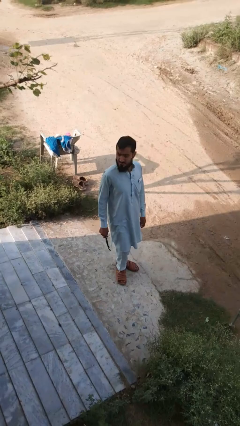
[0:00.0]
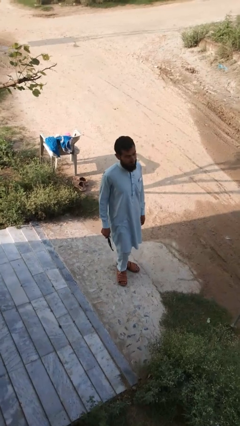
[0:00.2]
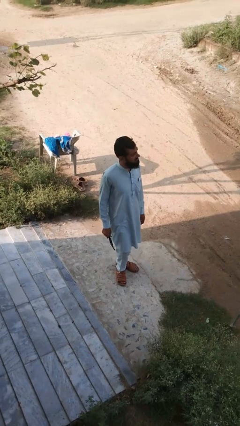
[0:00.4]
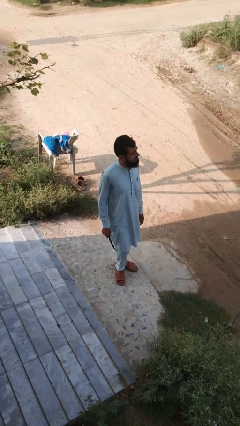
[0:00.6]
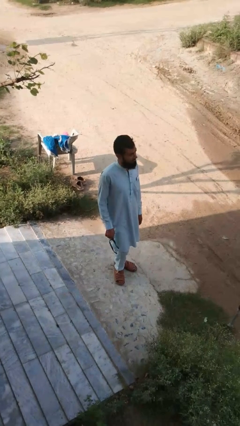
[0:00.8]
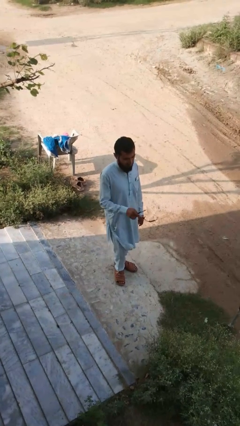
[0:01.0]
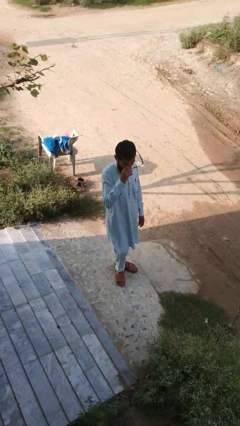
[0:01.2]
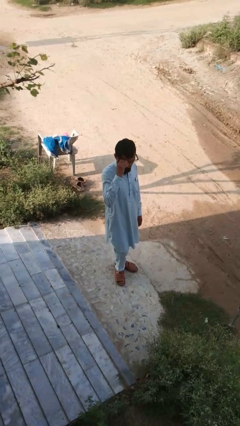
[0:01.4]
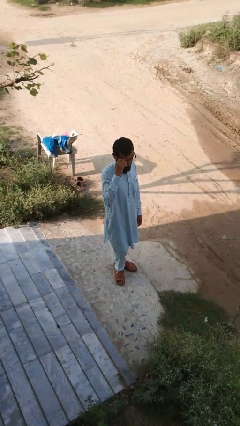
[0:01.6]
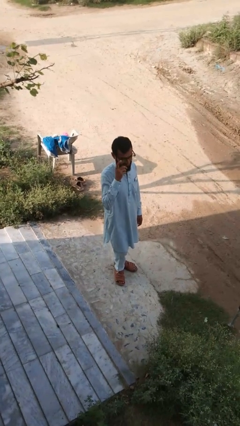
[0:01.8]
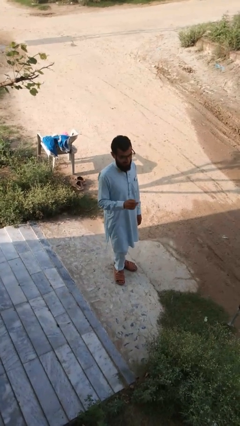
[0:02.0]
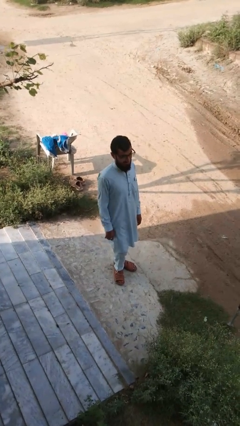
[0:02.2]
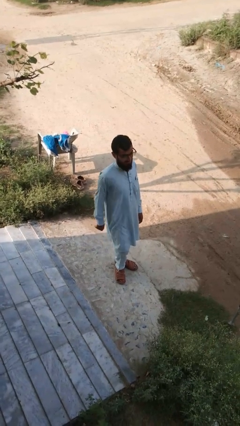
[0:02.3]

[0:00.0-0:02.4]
person puts on glasses

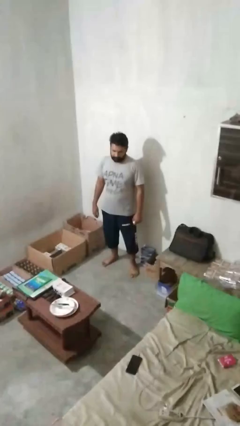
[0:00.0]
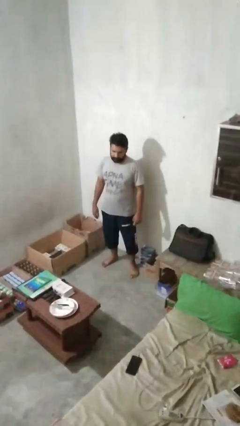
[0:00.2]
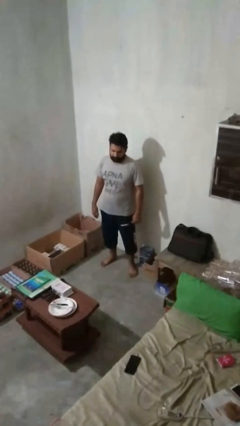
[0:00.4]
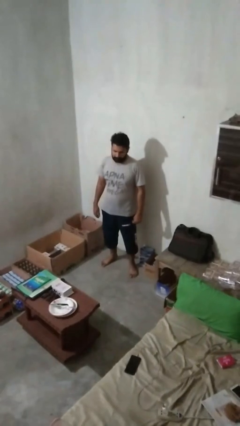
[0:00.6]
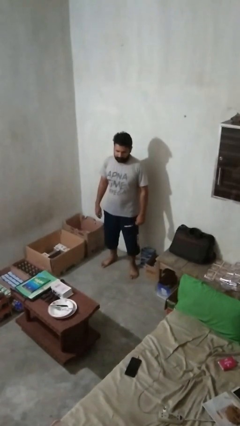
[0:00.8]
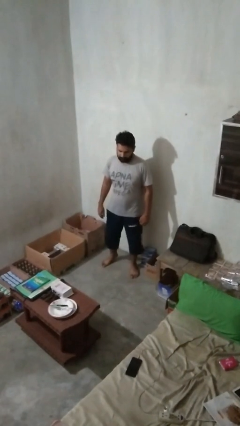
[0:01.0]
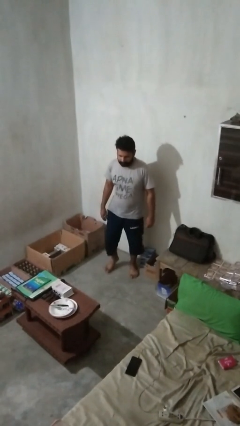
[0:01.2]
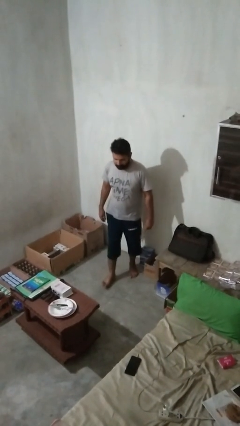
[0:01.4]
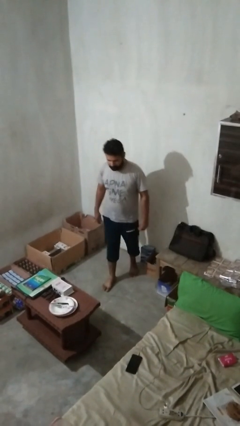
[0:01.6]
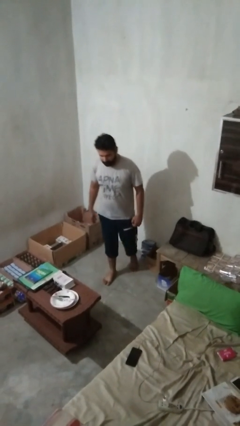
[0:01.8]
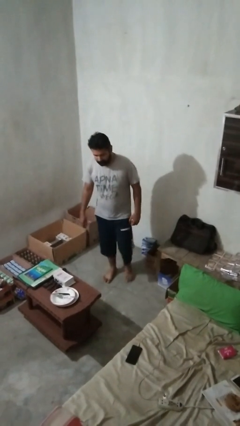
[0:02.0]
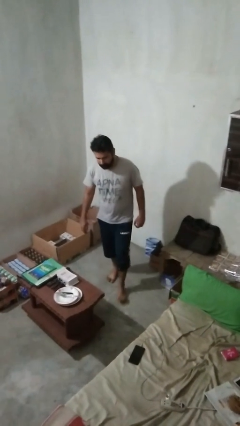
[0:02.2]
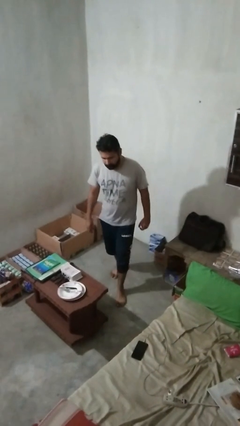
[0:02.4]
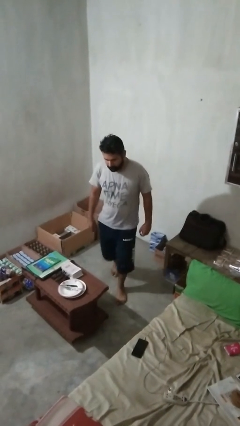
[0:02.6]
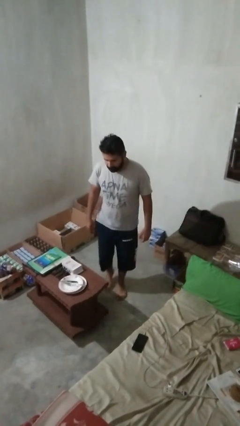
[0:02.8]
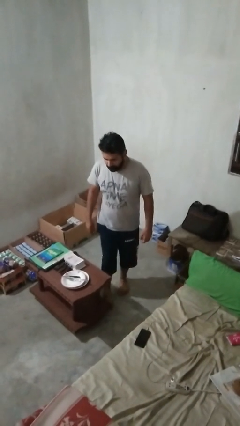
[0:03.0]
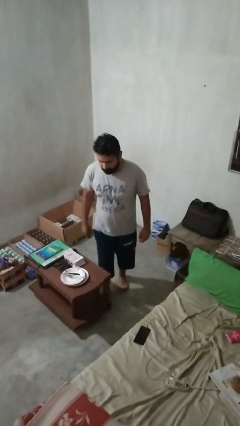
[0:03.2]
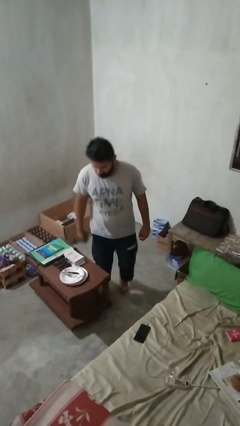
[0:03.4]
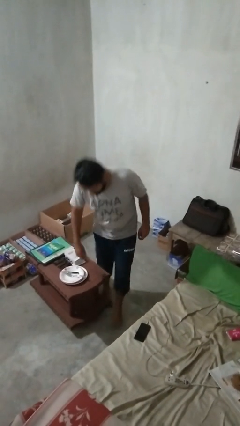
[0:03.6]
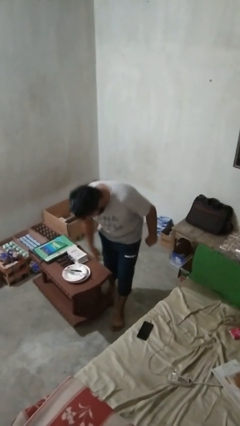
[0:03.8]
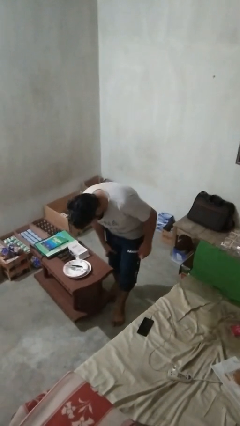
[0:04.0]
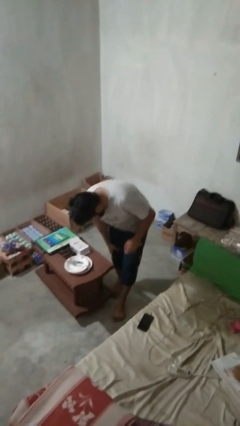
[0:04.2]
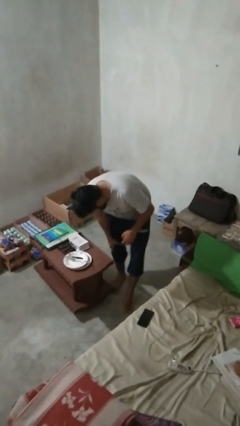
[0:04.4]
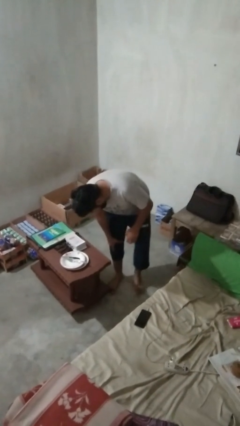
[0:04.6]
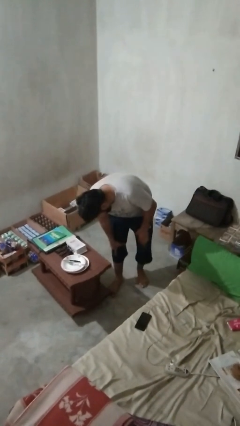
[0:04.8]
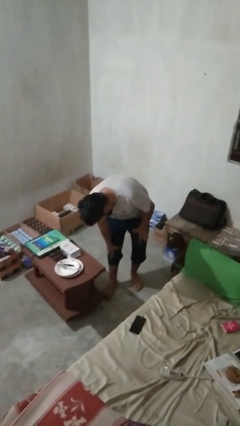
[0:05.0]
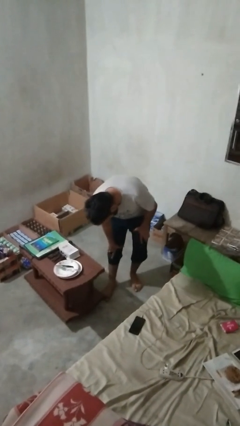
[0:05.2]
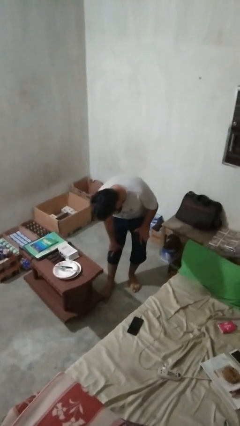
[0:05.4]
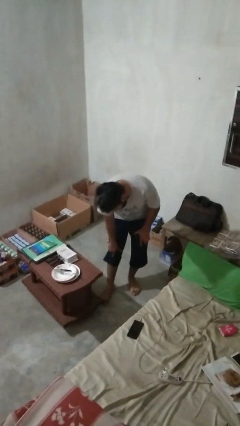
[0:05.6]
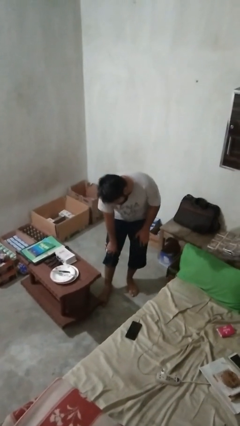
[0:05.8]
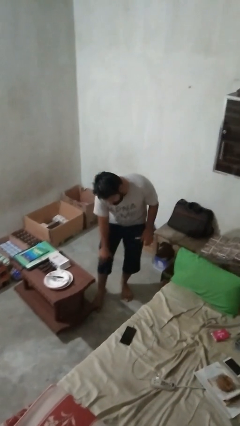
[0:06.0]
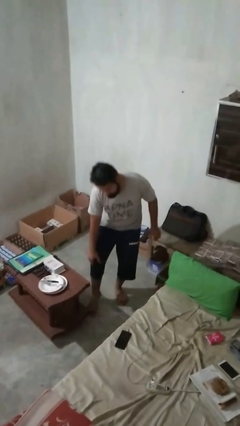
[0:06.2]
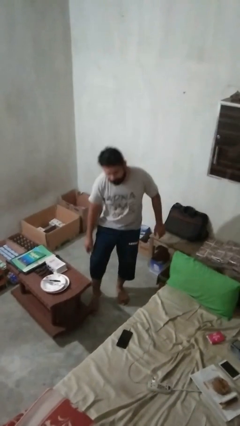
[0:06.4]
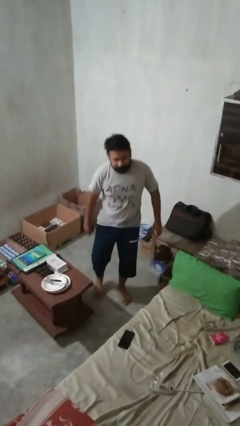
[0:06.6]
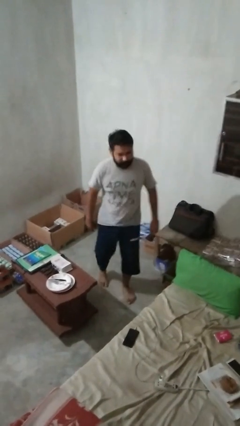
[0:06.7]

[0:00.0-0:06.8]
person bumps into table

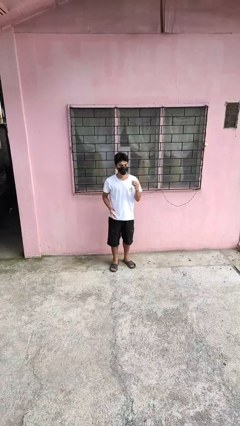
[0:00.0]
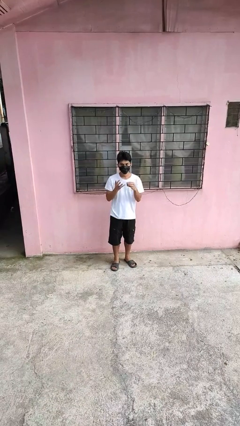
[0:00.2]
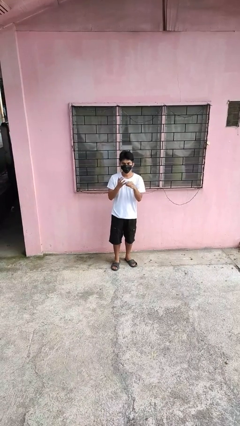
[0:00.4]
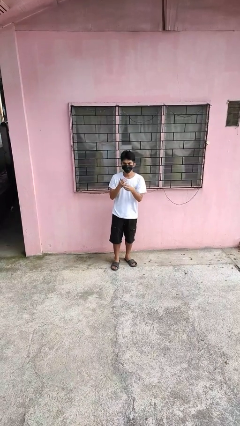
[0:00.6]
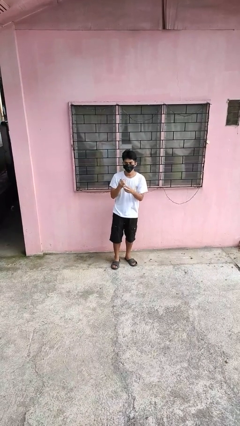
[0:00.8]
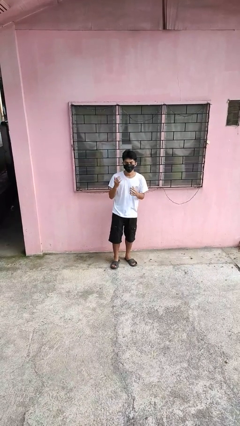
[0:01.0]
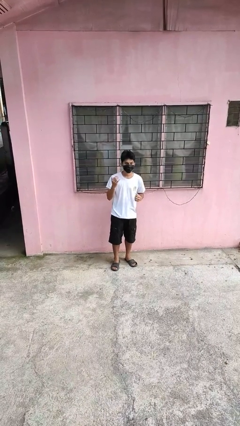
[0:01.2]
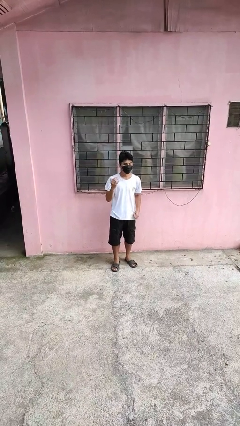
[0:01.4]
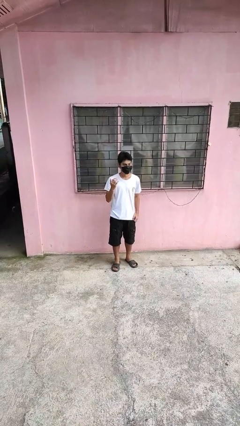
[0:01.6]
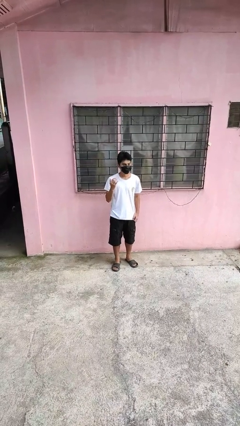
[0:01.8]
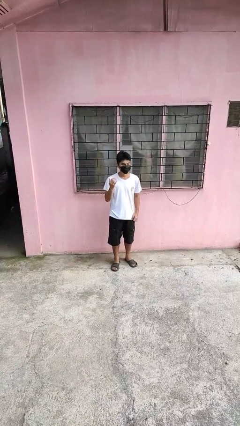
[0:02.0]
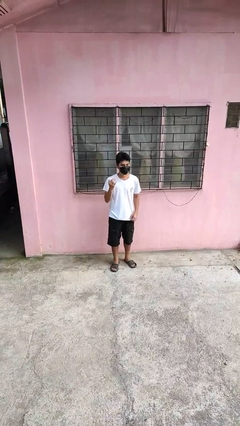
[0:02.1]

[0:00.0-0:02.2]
person puts on ring

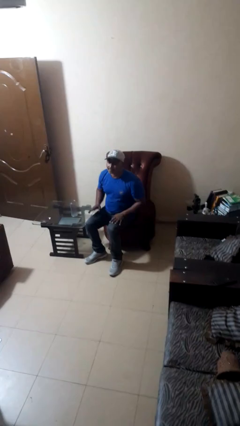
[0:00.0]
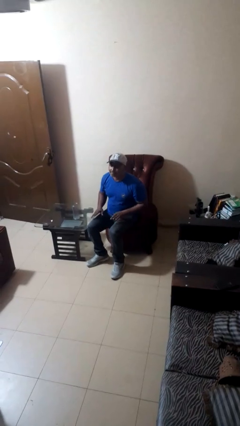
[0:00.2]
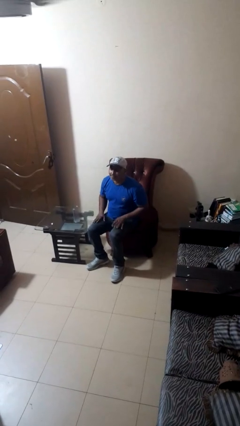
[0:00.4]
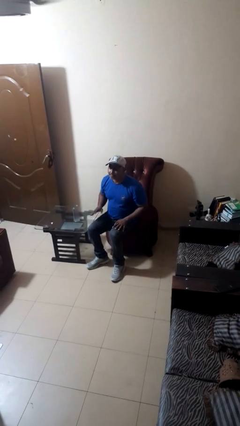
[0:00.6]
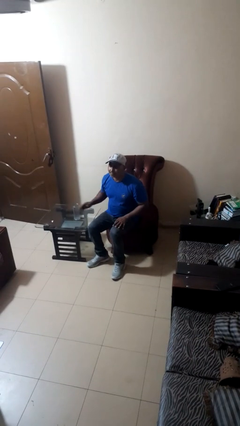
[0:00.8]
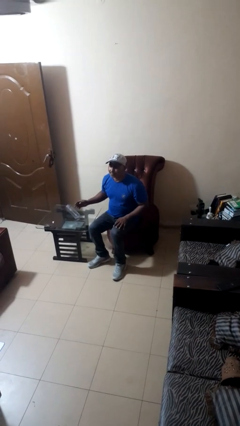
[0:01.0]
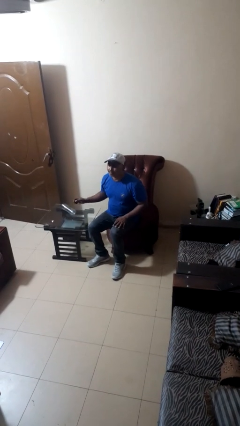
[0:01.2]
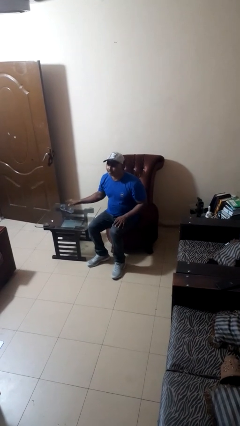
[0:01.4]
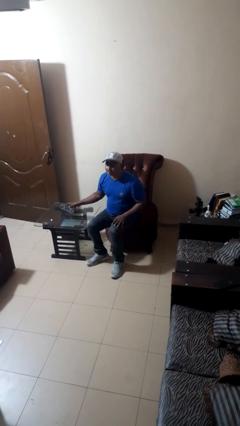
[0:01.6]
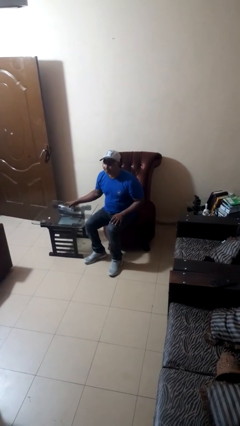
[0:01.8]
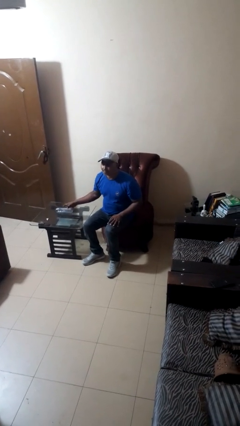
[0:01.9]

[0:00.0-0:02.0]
person knocks over glass

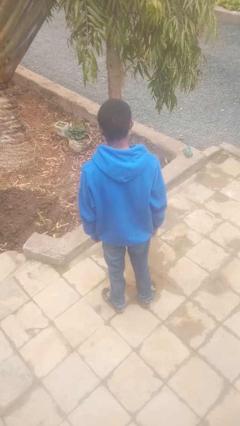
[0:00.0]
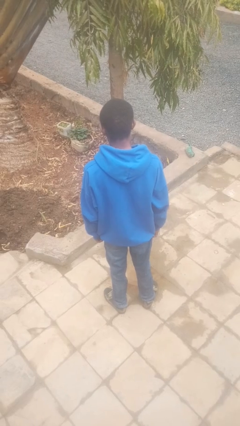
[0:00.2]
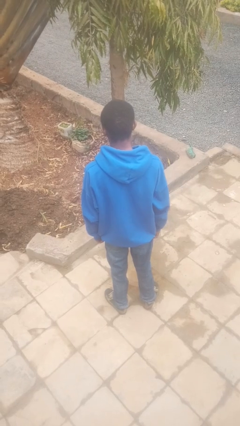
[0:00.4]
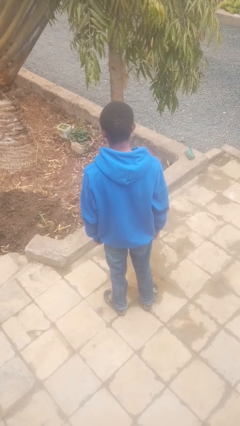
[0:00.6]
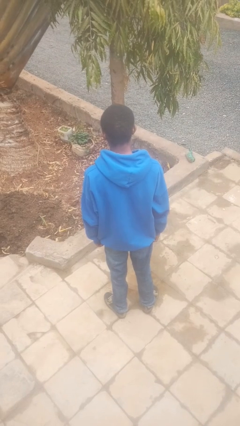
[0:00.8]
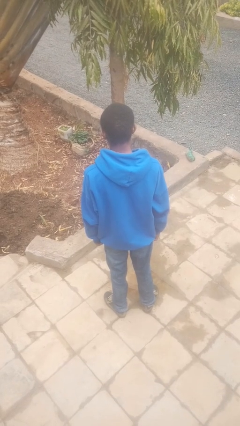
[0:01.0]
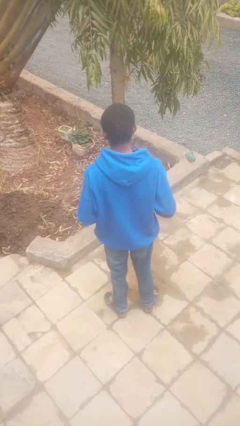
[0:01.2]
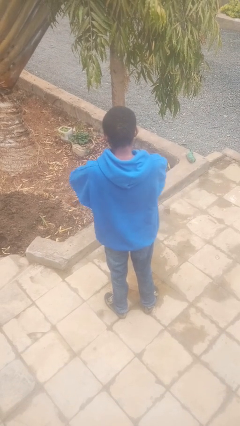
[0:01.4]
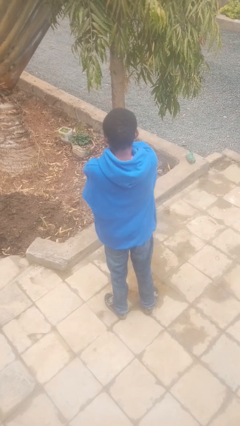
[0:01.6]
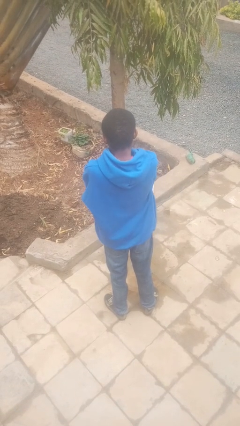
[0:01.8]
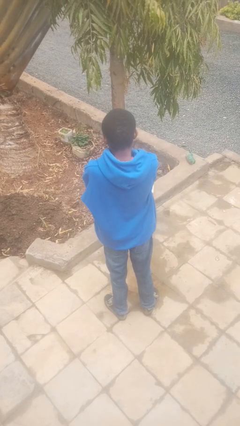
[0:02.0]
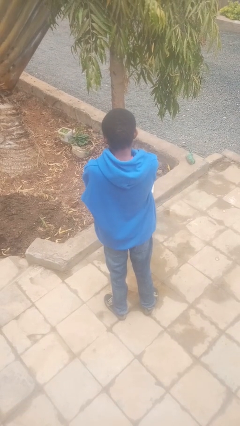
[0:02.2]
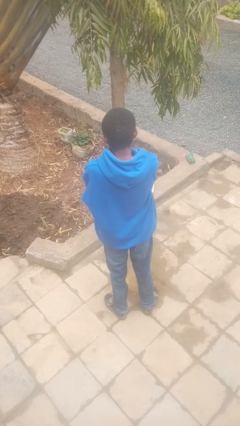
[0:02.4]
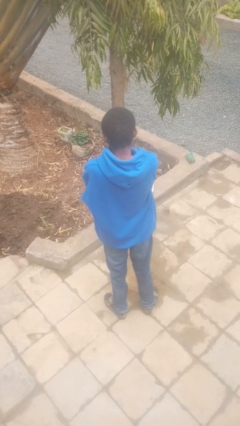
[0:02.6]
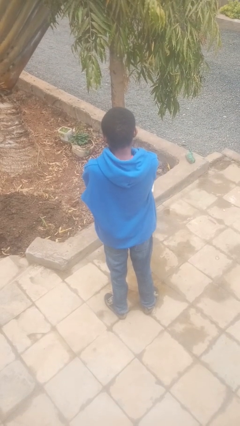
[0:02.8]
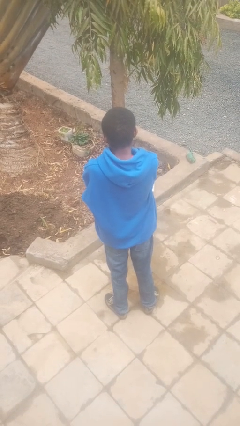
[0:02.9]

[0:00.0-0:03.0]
person crosses arms

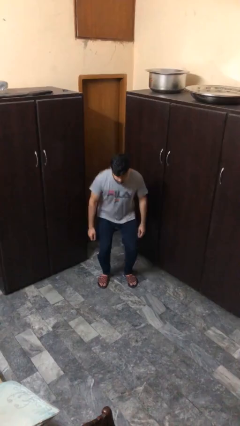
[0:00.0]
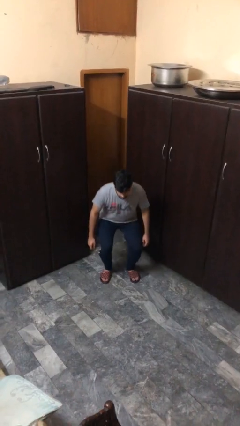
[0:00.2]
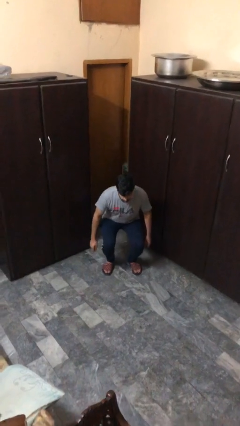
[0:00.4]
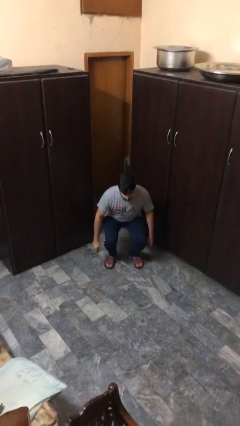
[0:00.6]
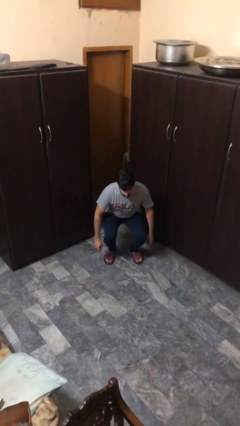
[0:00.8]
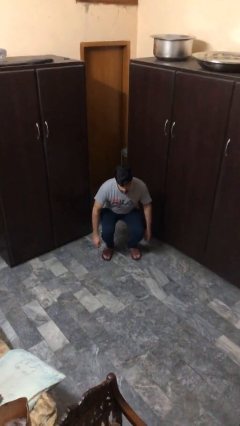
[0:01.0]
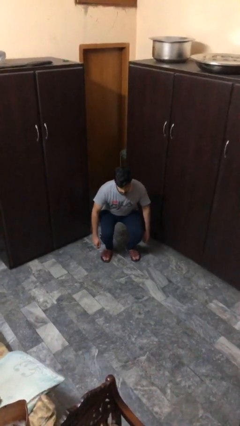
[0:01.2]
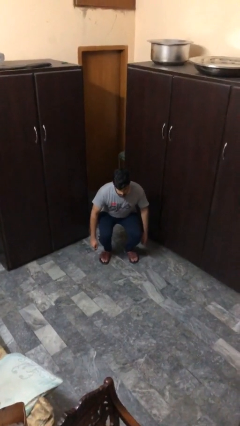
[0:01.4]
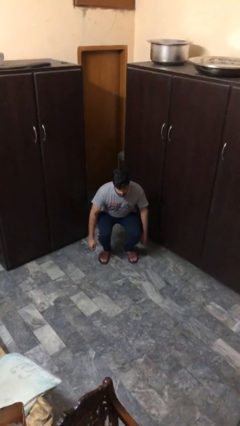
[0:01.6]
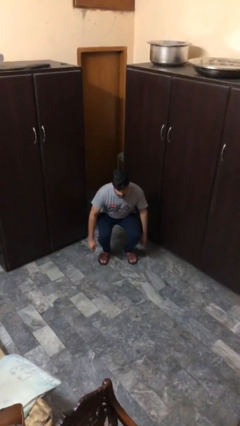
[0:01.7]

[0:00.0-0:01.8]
person squats
